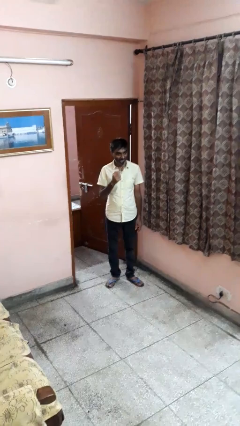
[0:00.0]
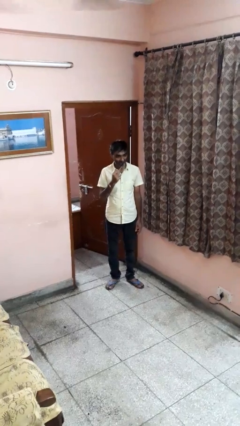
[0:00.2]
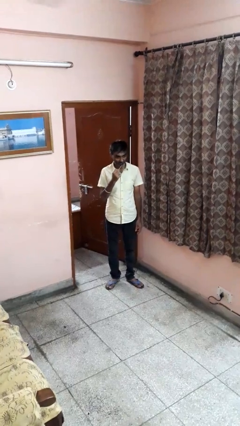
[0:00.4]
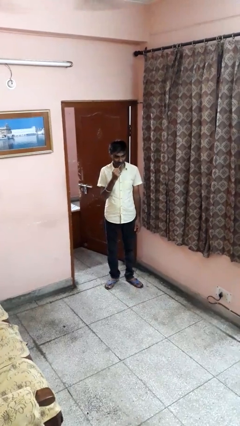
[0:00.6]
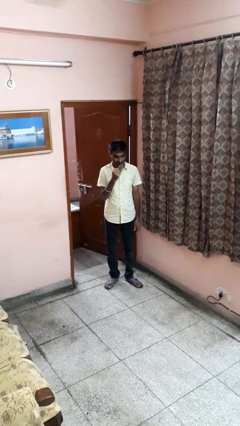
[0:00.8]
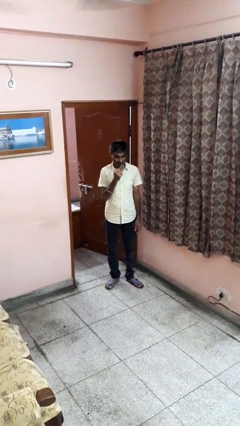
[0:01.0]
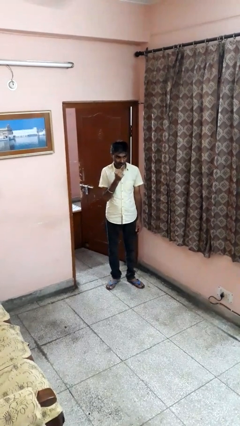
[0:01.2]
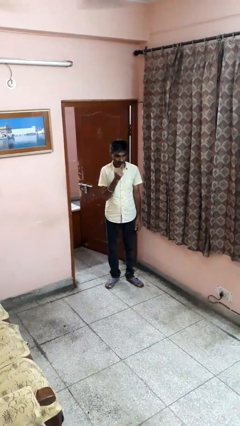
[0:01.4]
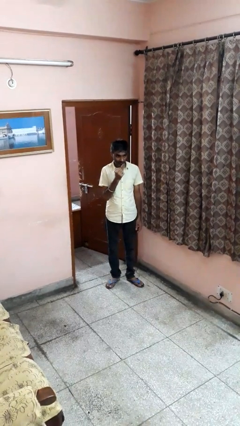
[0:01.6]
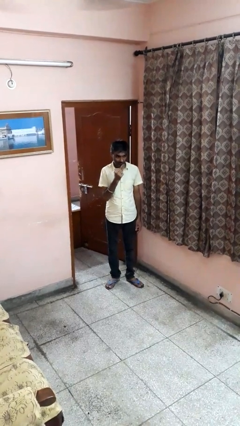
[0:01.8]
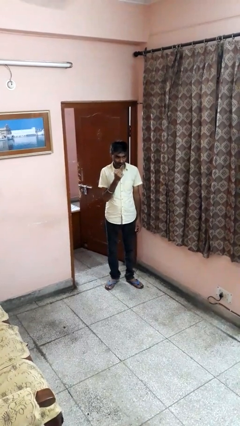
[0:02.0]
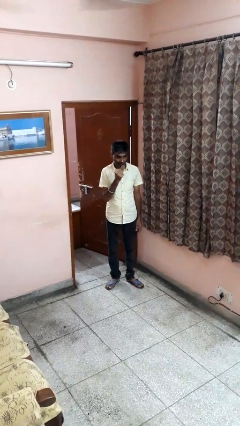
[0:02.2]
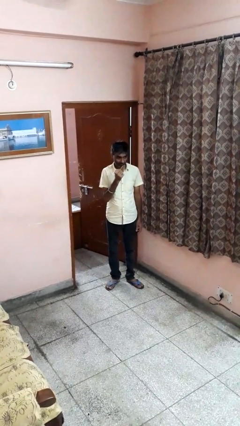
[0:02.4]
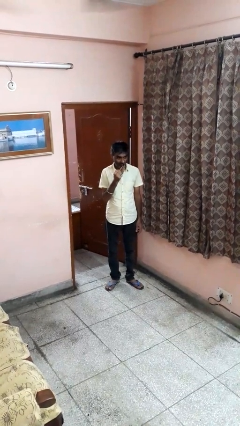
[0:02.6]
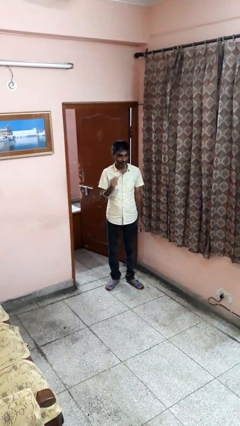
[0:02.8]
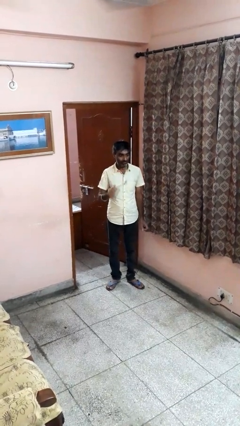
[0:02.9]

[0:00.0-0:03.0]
person brushes teeth

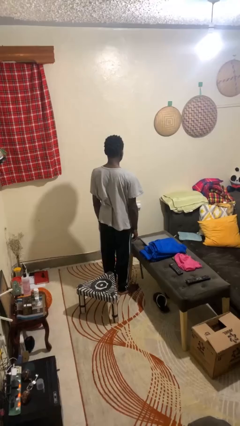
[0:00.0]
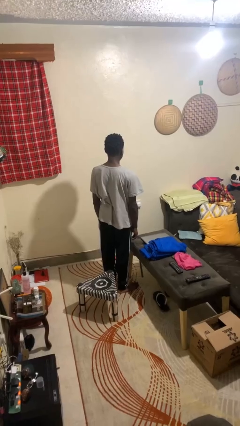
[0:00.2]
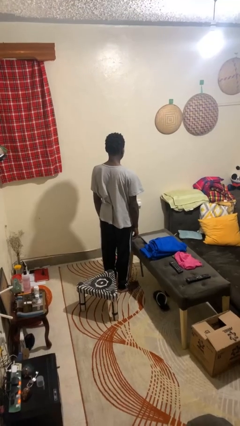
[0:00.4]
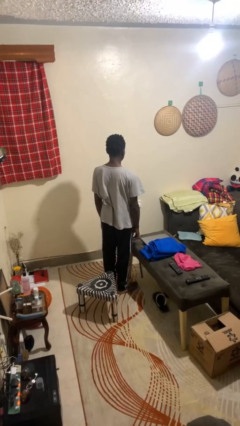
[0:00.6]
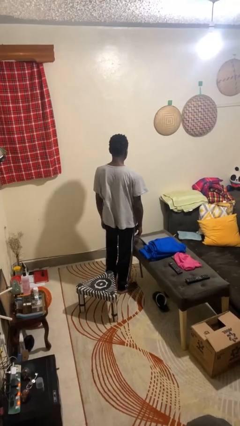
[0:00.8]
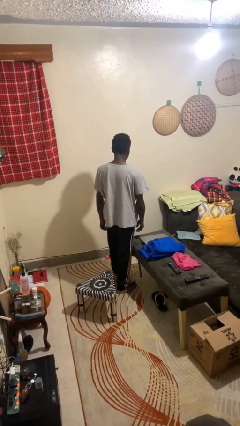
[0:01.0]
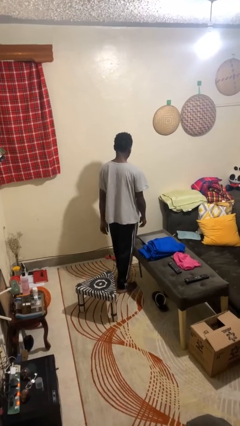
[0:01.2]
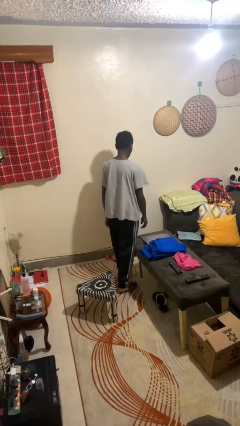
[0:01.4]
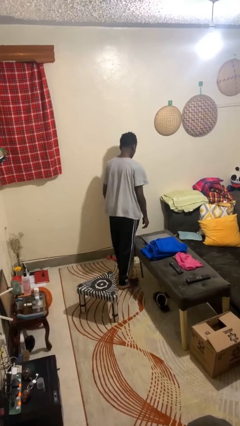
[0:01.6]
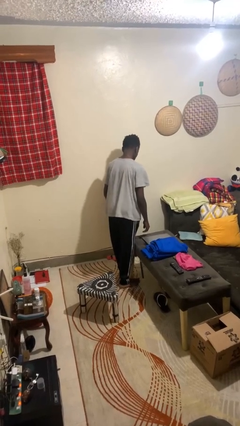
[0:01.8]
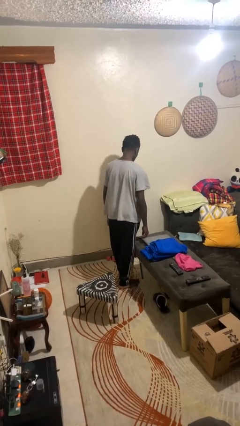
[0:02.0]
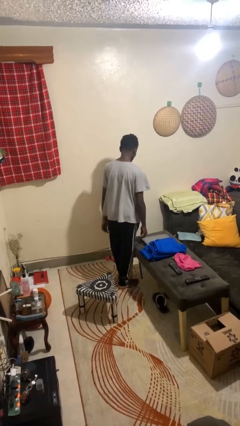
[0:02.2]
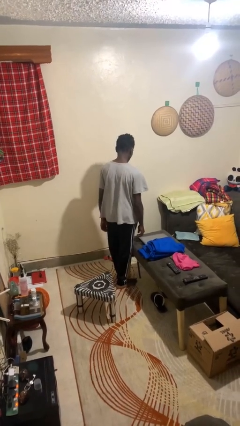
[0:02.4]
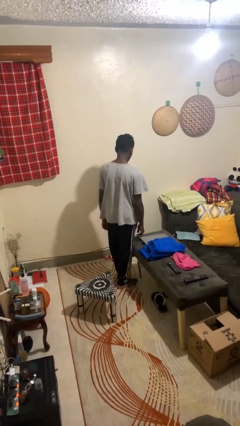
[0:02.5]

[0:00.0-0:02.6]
person bumps into table

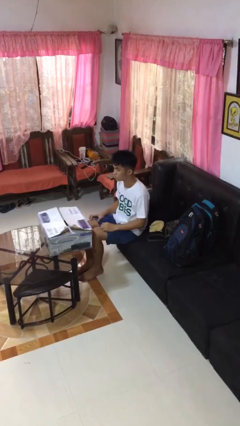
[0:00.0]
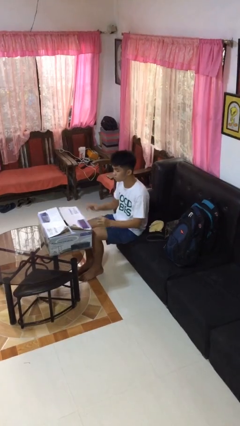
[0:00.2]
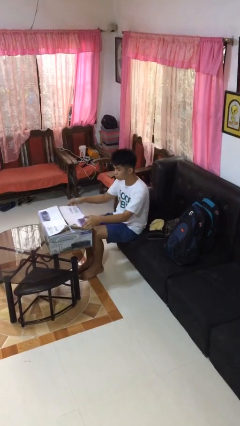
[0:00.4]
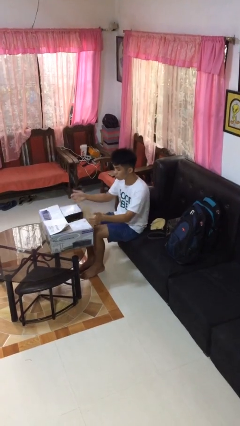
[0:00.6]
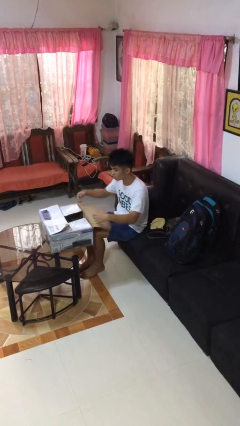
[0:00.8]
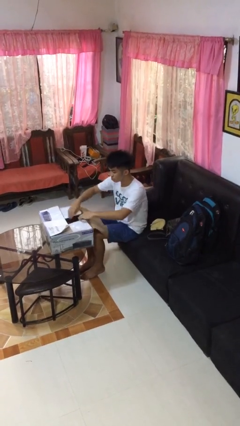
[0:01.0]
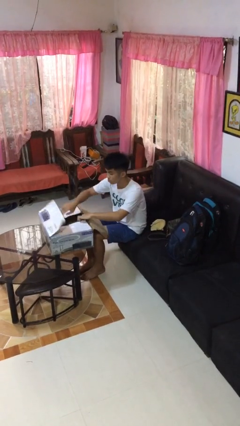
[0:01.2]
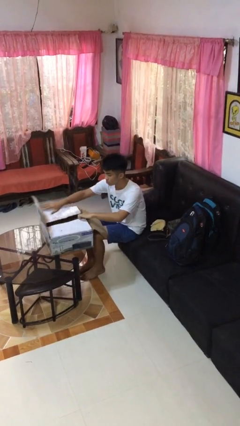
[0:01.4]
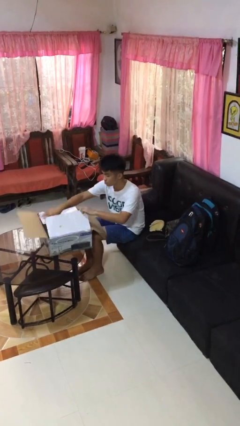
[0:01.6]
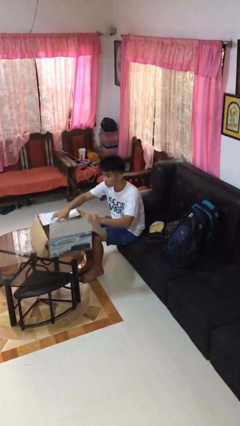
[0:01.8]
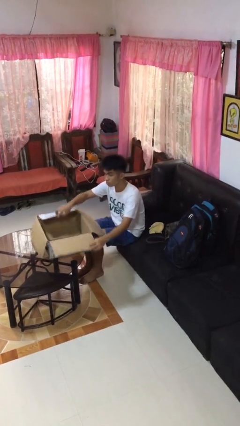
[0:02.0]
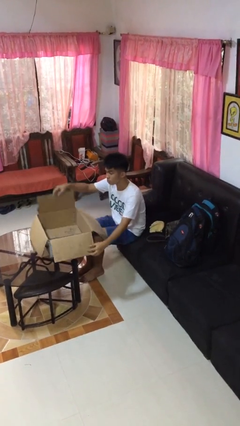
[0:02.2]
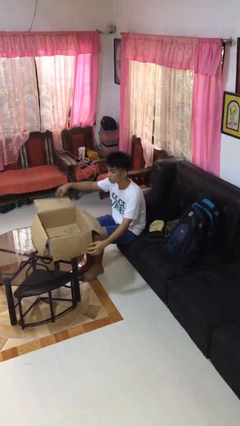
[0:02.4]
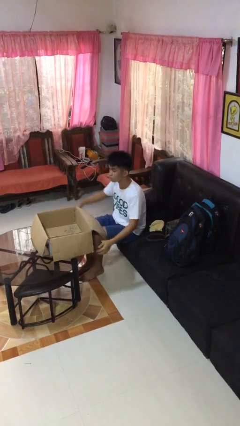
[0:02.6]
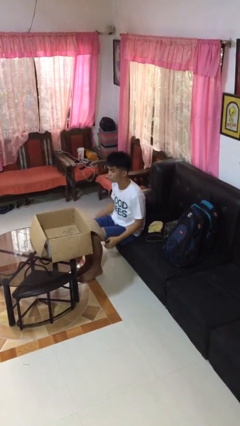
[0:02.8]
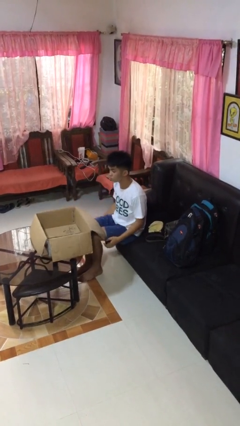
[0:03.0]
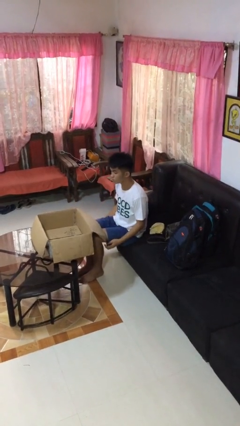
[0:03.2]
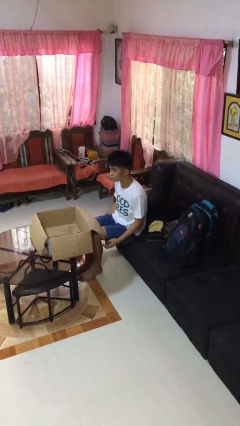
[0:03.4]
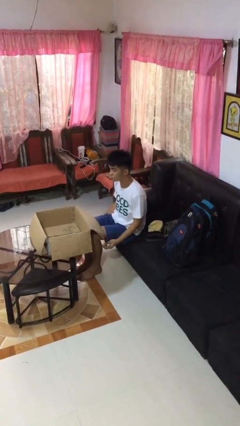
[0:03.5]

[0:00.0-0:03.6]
person opens box

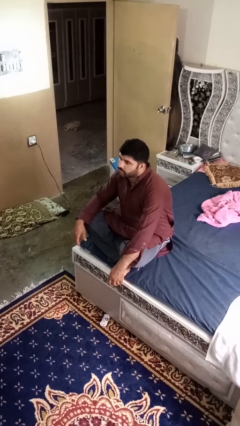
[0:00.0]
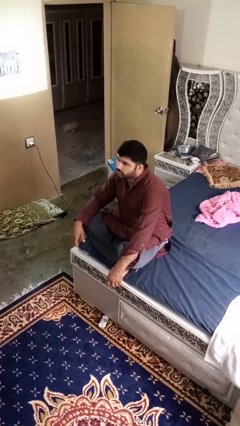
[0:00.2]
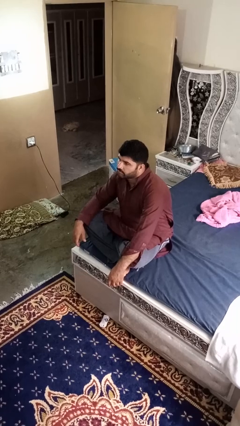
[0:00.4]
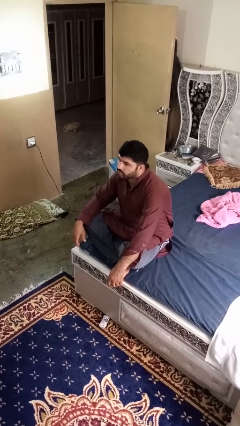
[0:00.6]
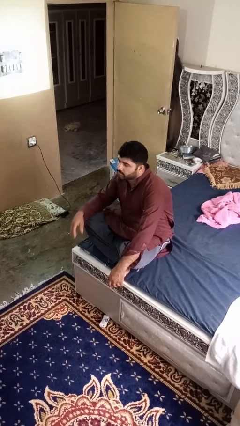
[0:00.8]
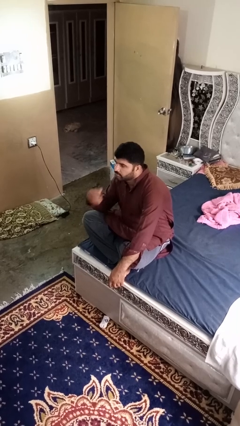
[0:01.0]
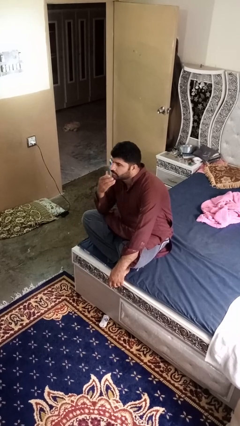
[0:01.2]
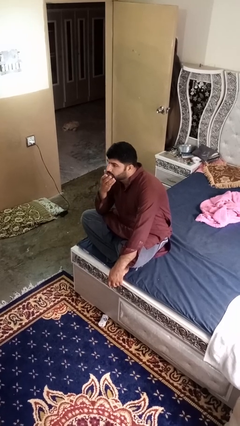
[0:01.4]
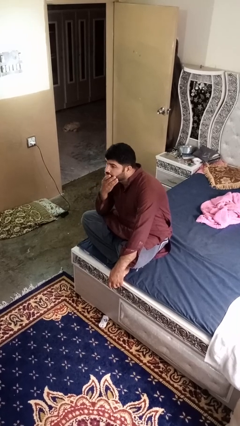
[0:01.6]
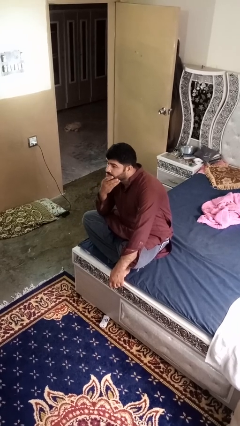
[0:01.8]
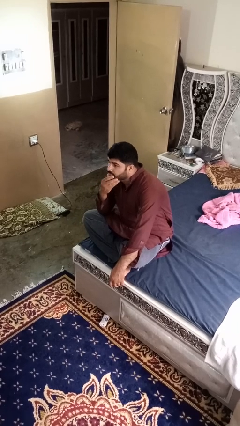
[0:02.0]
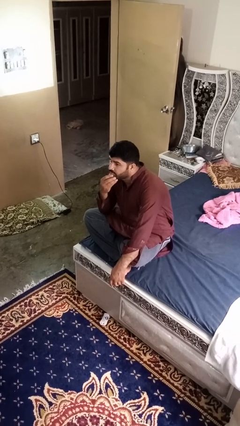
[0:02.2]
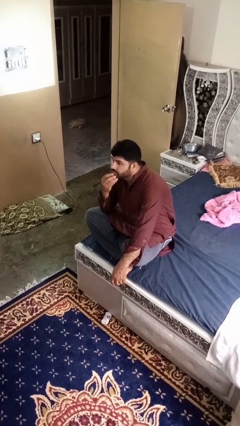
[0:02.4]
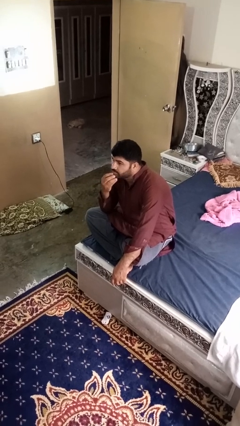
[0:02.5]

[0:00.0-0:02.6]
person strokes chin

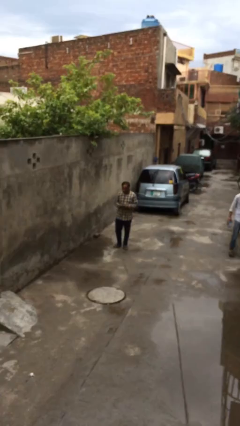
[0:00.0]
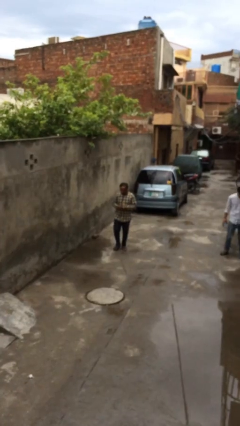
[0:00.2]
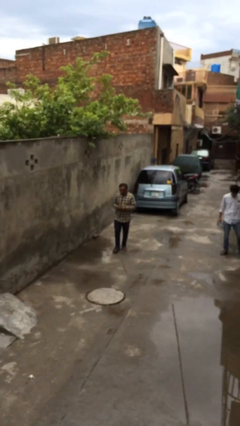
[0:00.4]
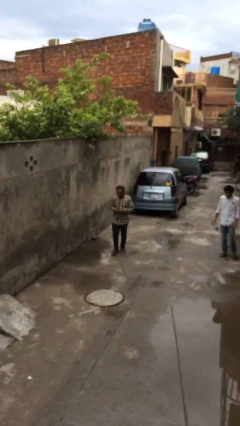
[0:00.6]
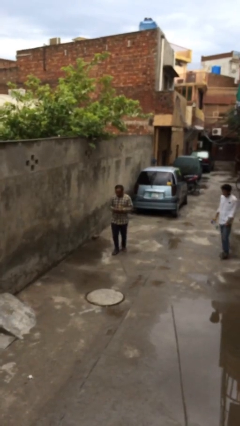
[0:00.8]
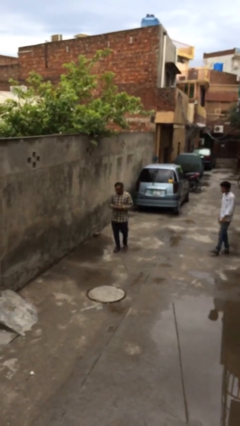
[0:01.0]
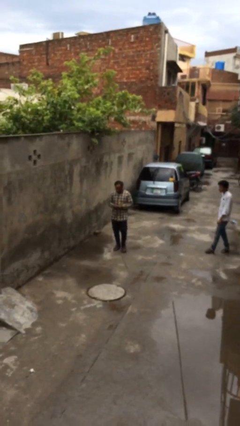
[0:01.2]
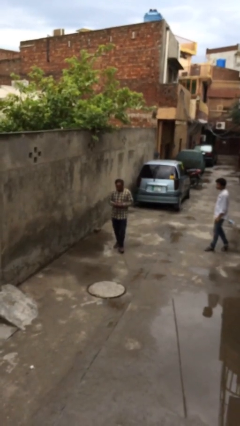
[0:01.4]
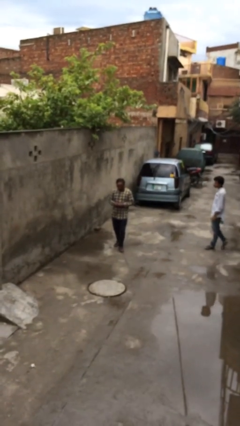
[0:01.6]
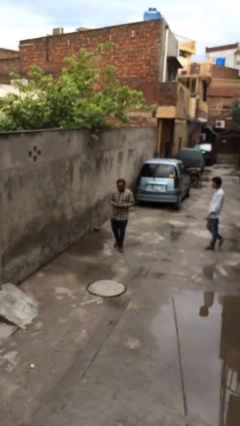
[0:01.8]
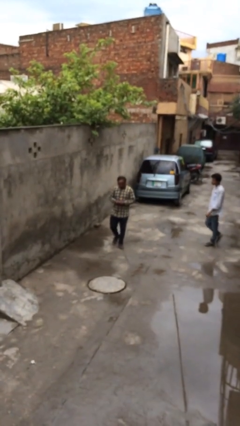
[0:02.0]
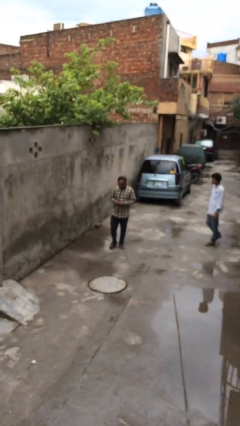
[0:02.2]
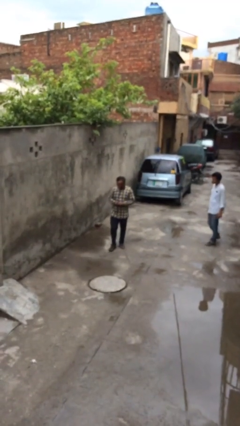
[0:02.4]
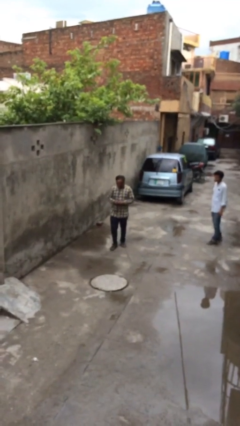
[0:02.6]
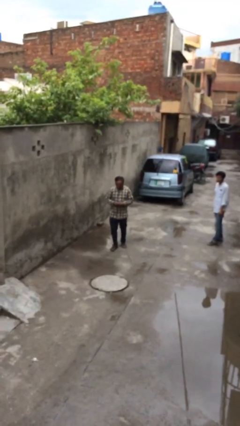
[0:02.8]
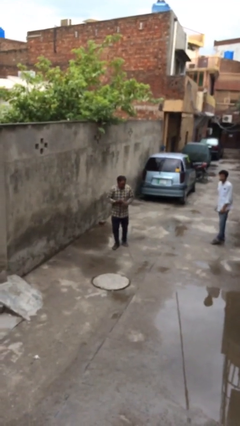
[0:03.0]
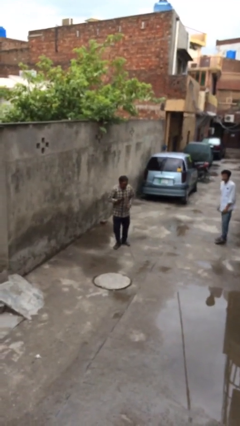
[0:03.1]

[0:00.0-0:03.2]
person texts on phone

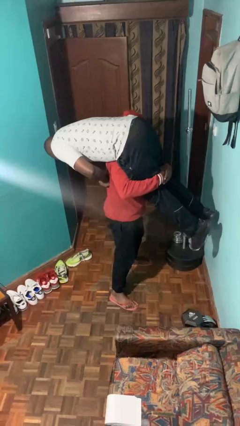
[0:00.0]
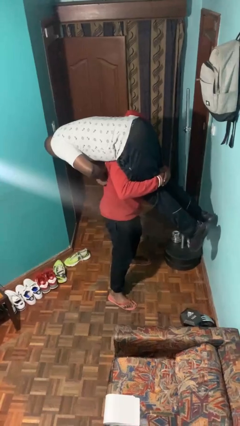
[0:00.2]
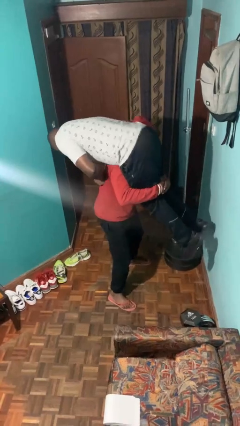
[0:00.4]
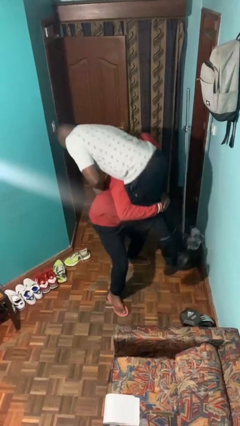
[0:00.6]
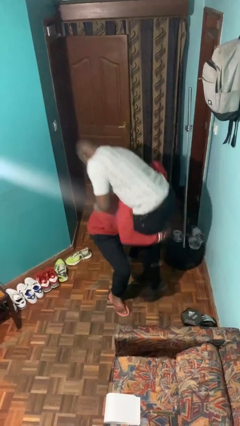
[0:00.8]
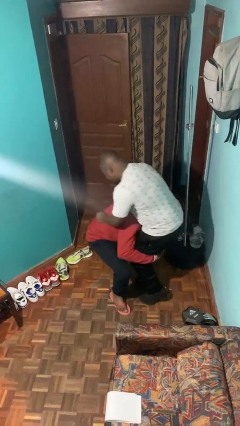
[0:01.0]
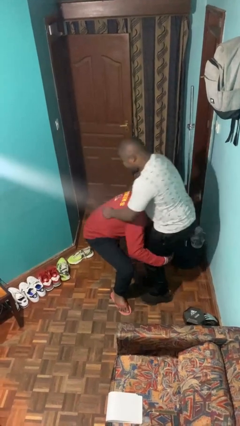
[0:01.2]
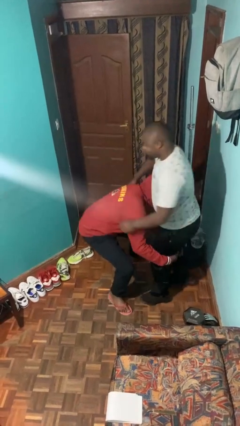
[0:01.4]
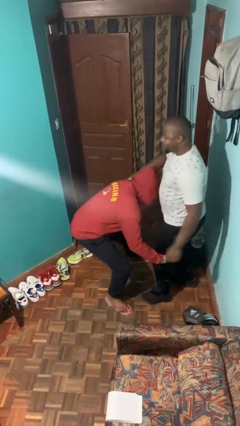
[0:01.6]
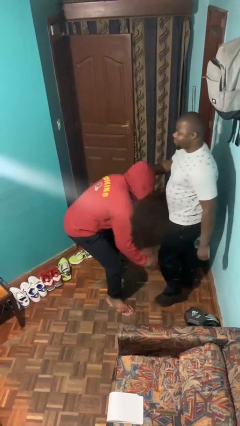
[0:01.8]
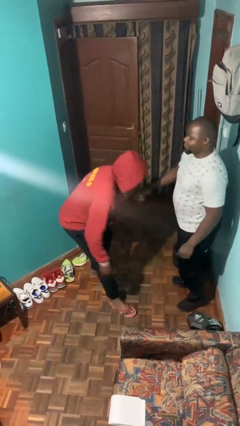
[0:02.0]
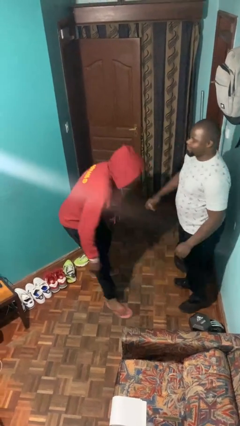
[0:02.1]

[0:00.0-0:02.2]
person puts down person
